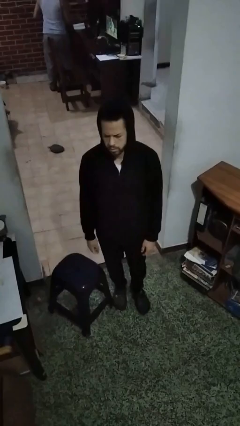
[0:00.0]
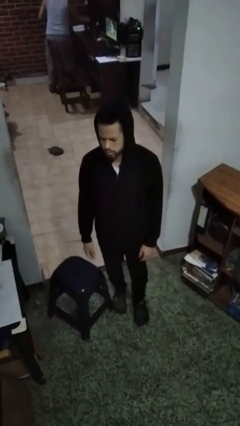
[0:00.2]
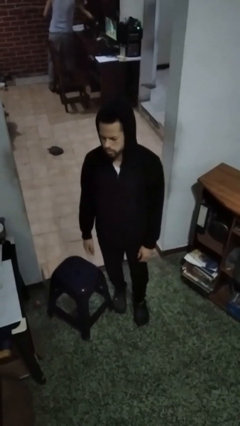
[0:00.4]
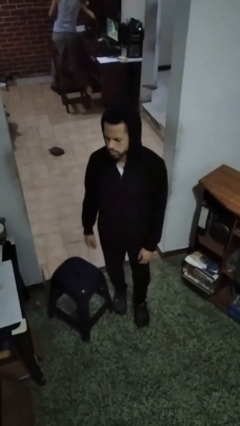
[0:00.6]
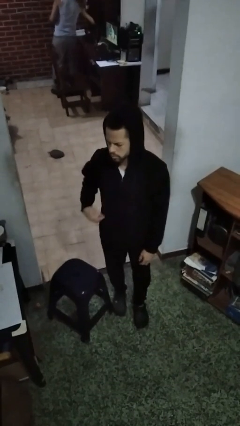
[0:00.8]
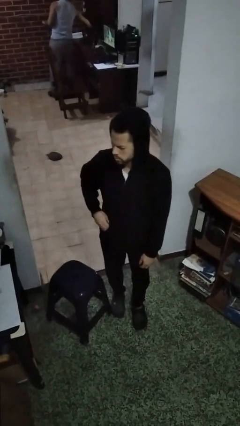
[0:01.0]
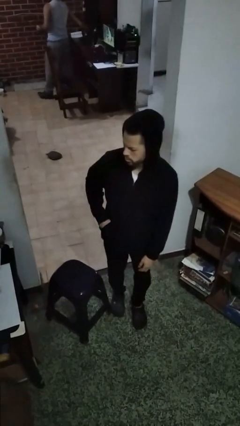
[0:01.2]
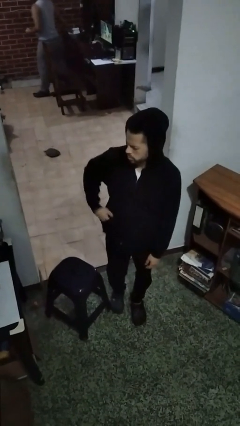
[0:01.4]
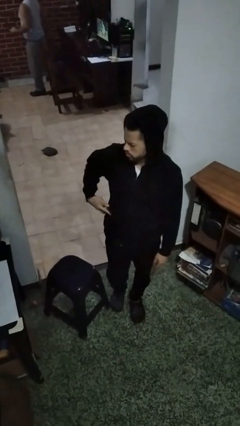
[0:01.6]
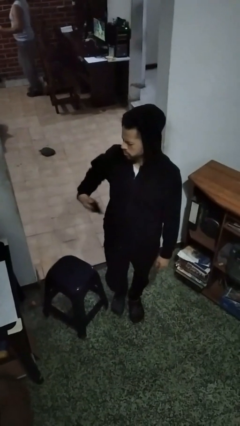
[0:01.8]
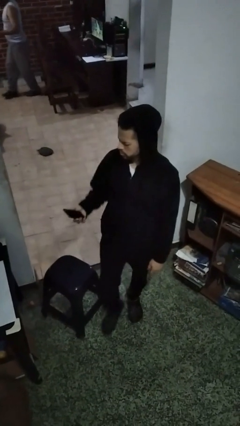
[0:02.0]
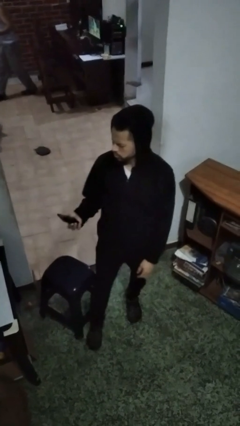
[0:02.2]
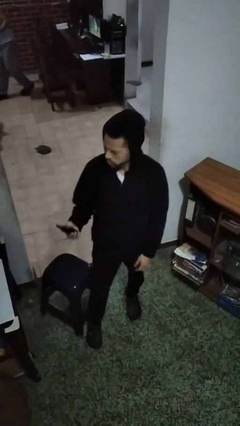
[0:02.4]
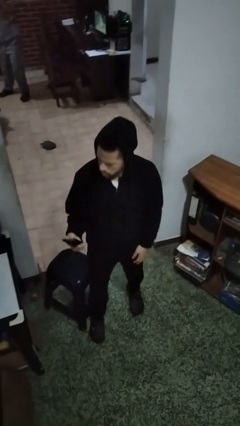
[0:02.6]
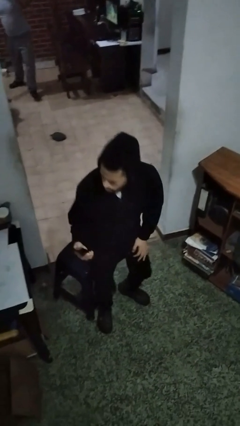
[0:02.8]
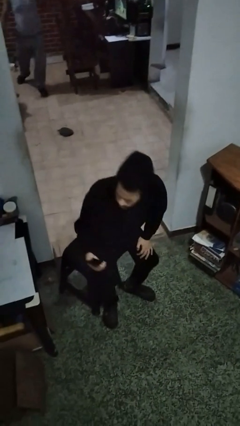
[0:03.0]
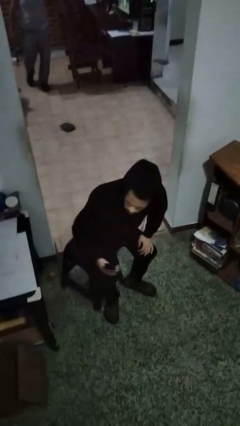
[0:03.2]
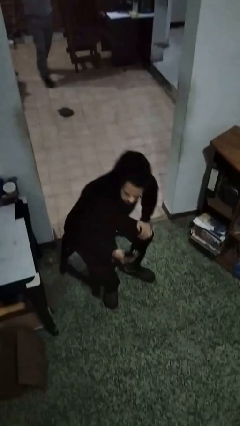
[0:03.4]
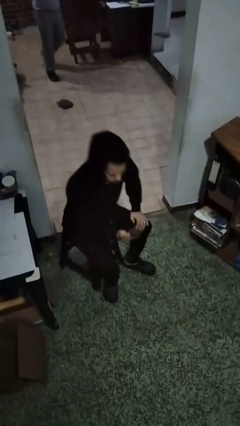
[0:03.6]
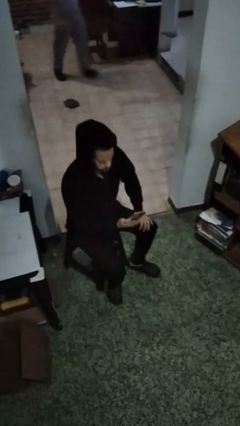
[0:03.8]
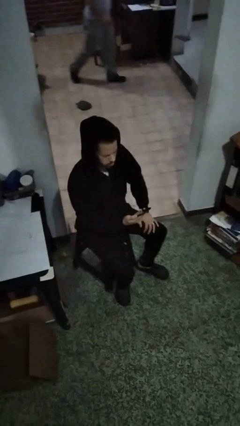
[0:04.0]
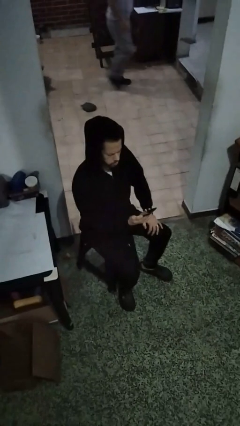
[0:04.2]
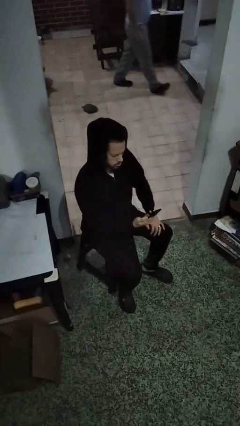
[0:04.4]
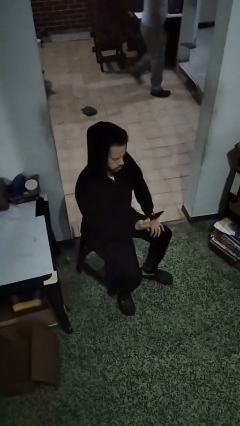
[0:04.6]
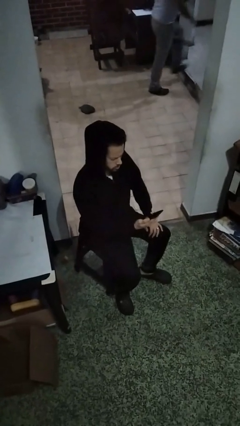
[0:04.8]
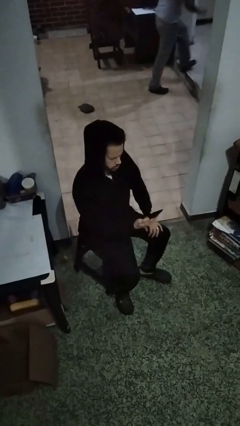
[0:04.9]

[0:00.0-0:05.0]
person takes phone from pocket

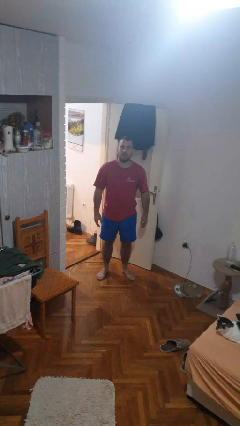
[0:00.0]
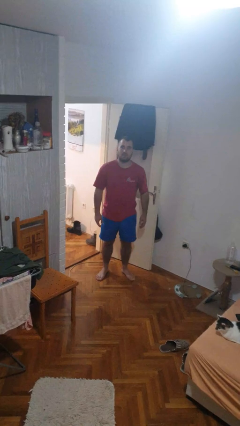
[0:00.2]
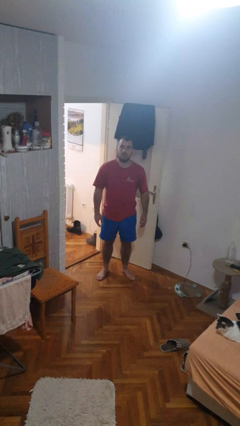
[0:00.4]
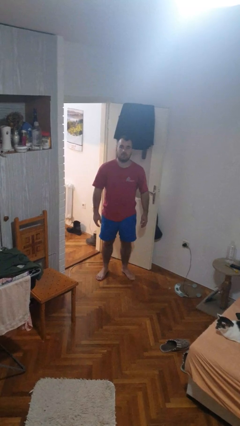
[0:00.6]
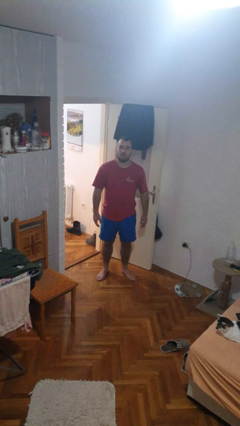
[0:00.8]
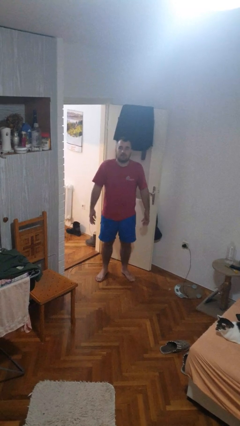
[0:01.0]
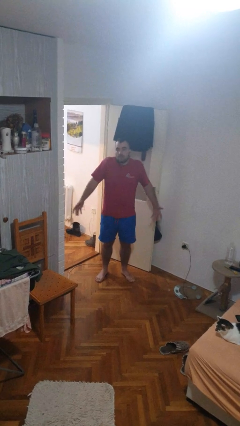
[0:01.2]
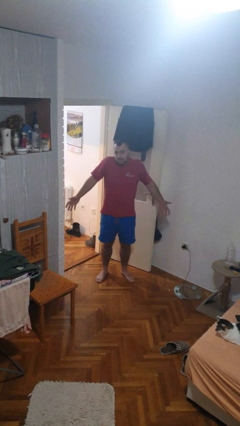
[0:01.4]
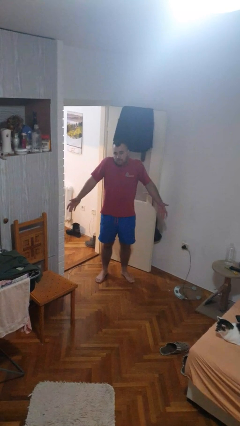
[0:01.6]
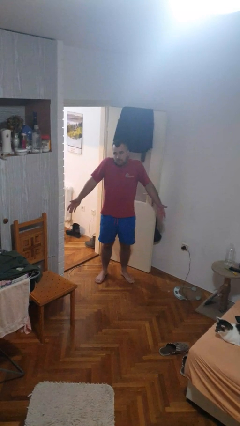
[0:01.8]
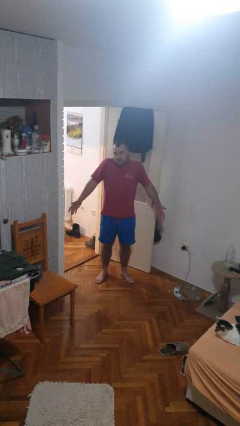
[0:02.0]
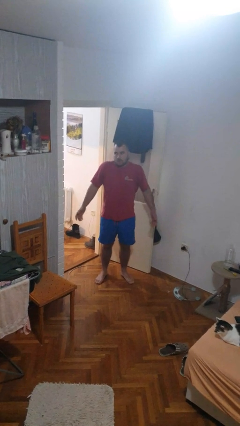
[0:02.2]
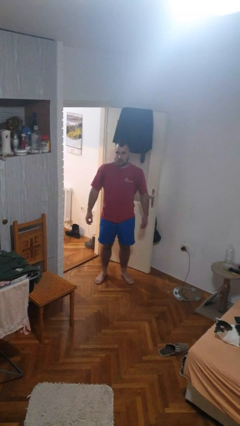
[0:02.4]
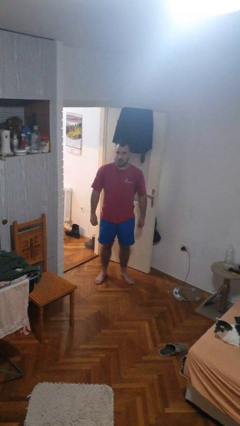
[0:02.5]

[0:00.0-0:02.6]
person shrugs

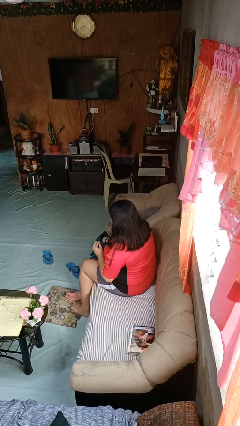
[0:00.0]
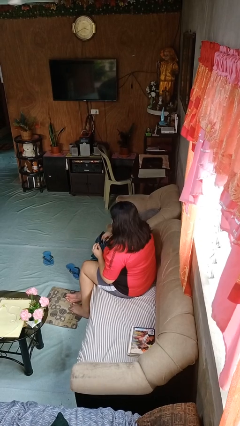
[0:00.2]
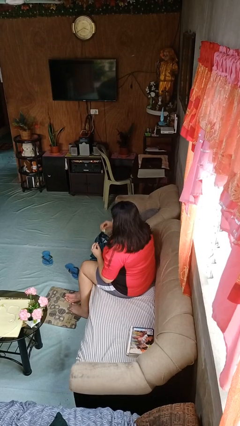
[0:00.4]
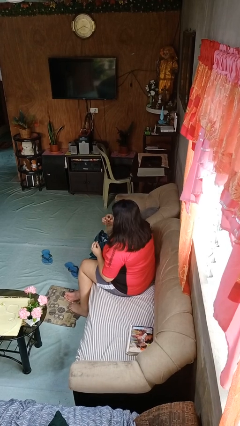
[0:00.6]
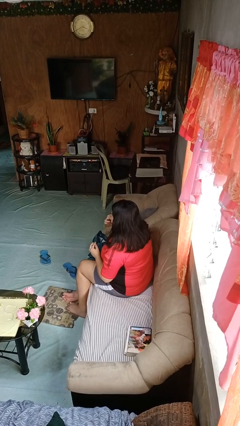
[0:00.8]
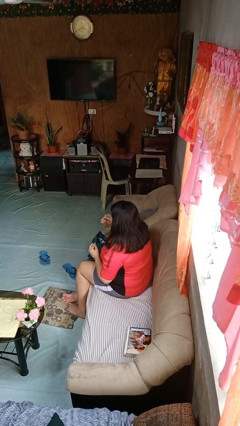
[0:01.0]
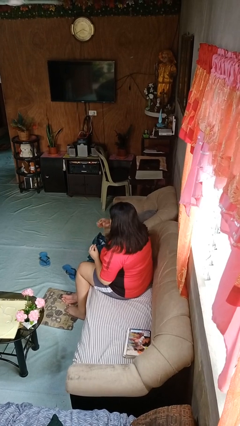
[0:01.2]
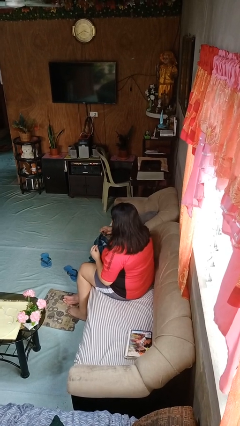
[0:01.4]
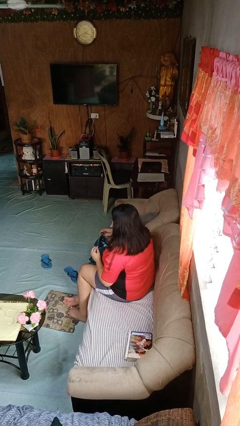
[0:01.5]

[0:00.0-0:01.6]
person eats snack from bag

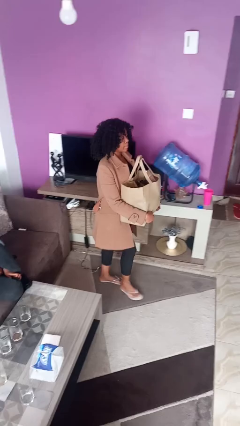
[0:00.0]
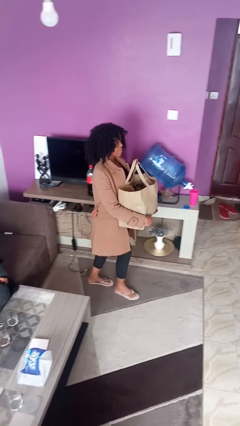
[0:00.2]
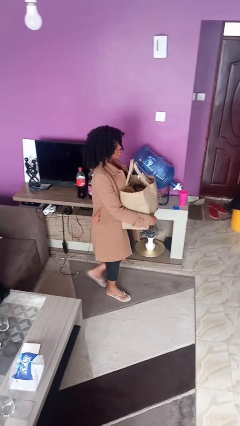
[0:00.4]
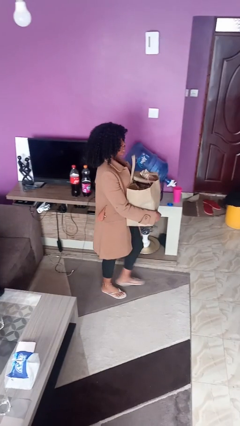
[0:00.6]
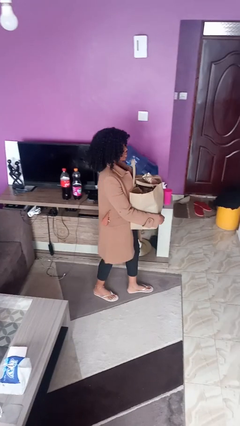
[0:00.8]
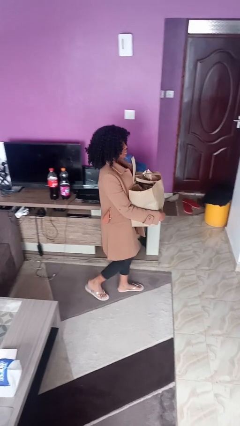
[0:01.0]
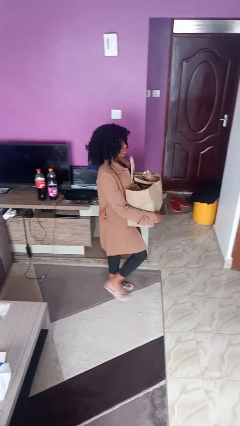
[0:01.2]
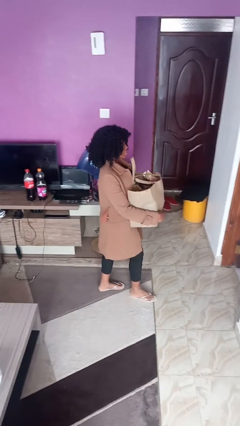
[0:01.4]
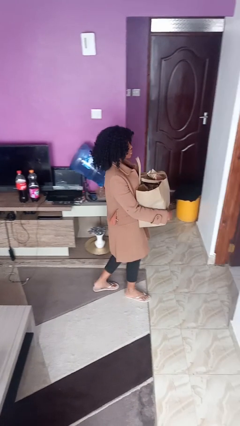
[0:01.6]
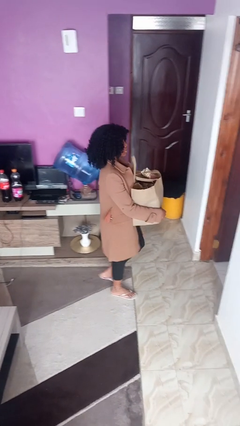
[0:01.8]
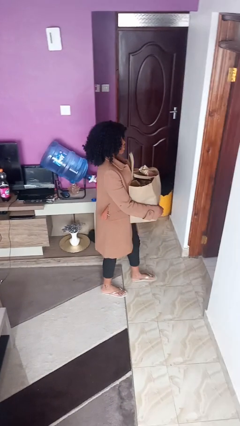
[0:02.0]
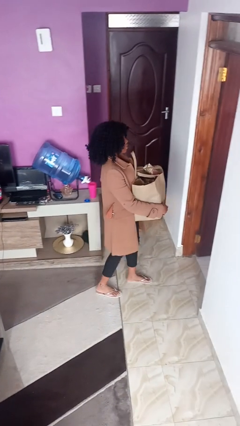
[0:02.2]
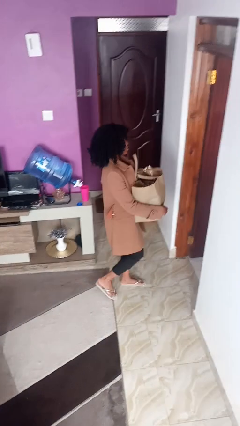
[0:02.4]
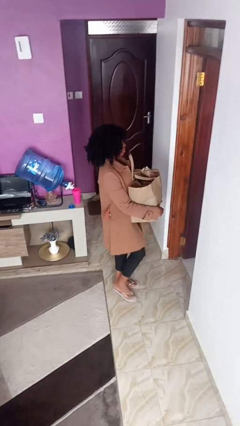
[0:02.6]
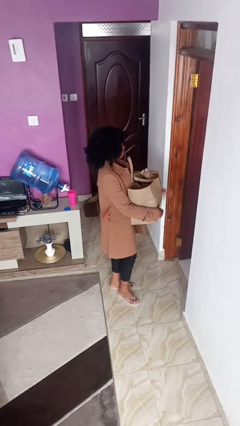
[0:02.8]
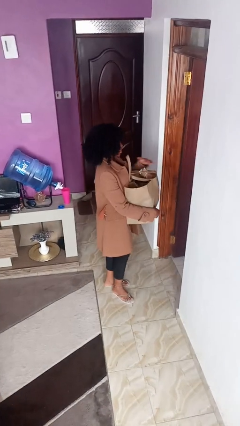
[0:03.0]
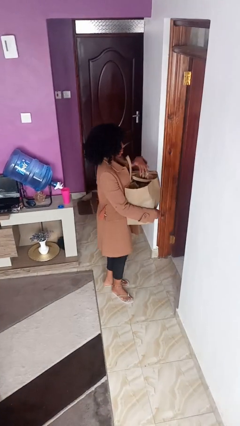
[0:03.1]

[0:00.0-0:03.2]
person carries groceries

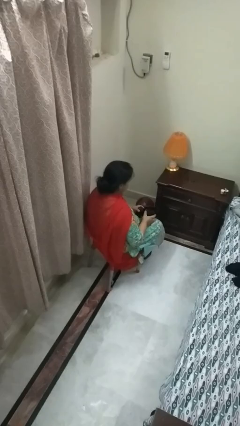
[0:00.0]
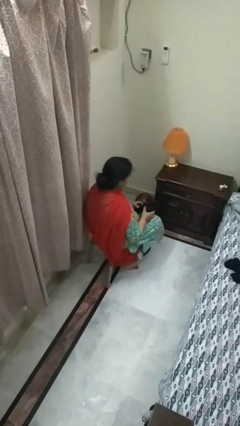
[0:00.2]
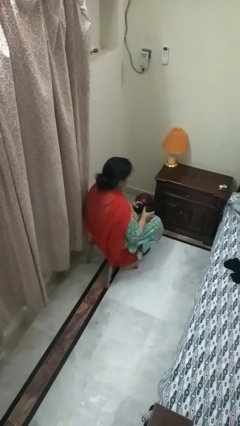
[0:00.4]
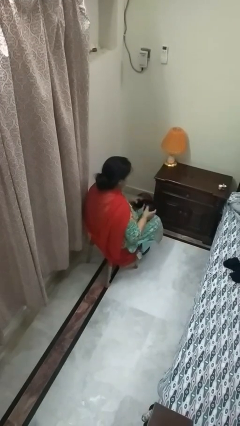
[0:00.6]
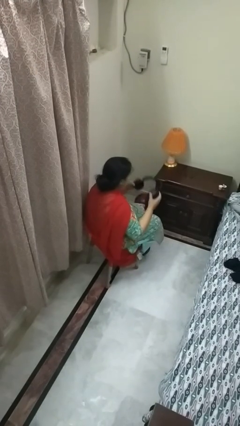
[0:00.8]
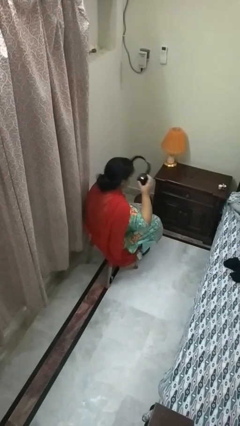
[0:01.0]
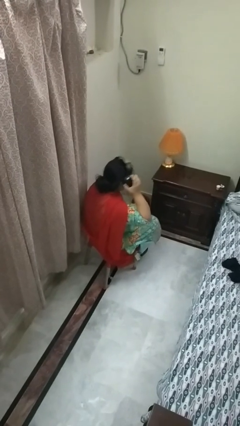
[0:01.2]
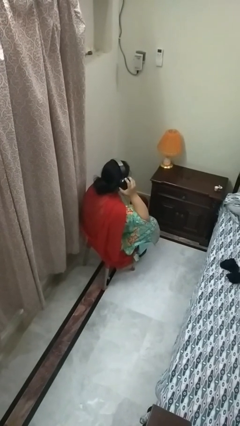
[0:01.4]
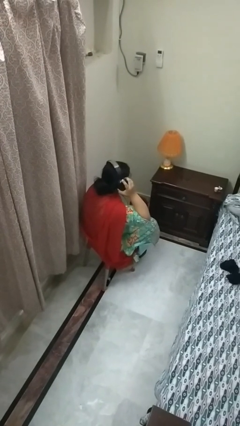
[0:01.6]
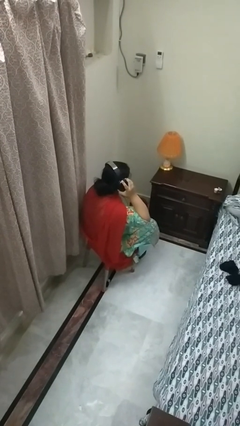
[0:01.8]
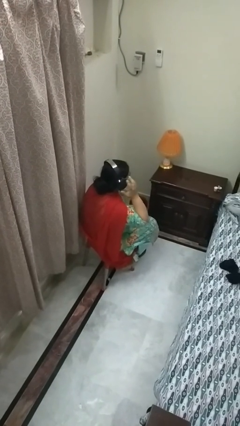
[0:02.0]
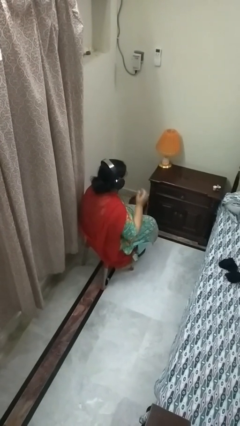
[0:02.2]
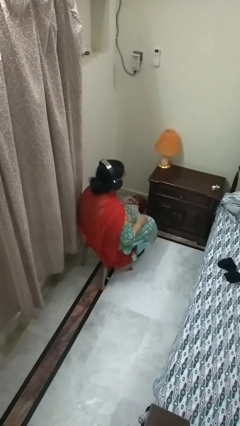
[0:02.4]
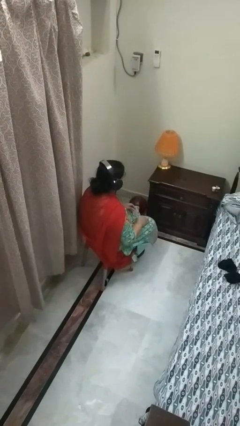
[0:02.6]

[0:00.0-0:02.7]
person puts on headphones

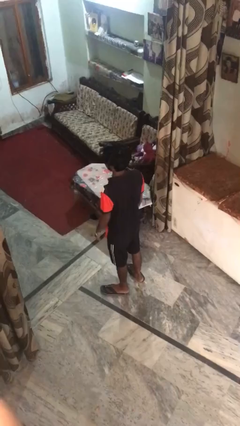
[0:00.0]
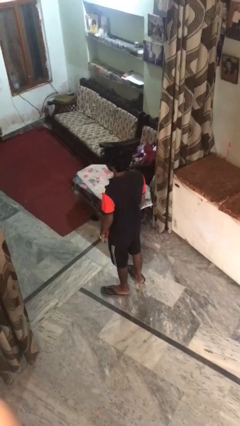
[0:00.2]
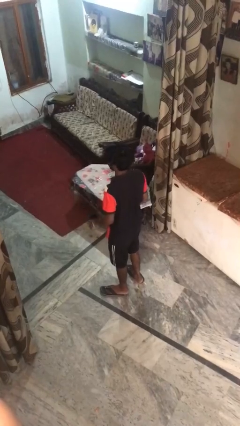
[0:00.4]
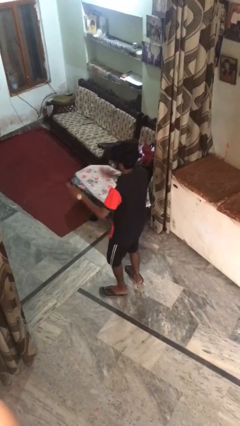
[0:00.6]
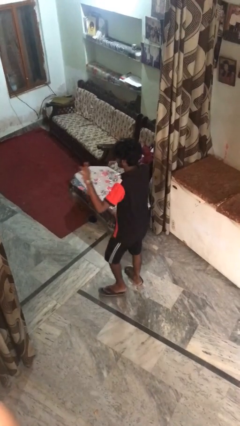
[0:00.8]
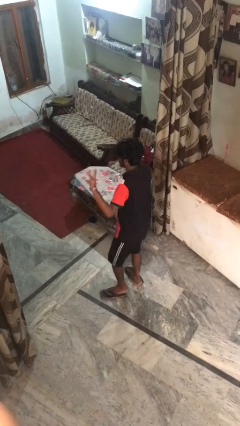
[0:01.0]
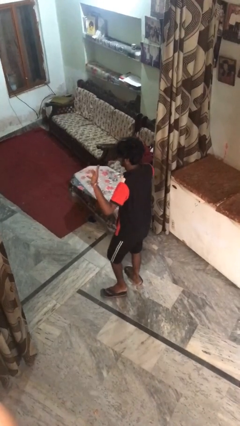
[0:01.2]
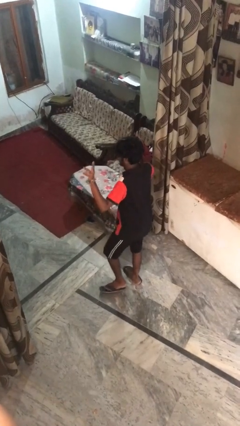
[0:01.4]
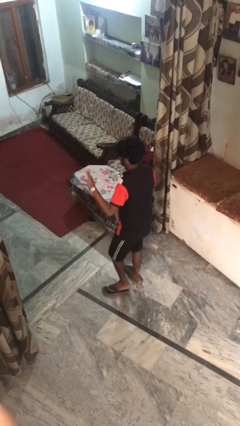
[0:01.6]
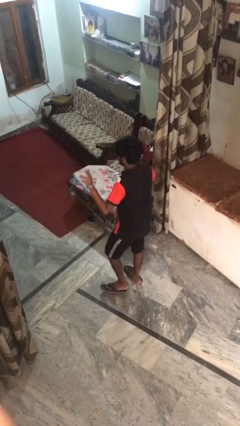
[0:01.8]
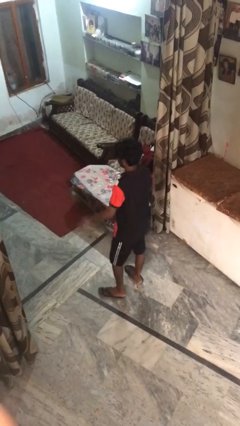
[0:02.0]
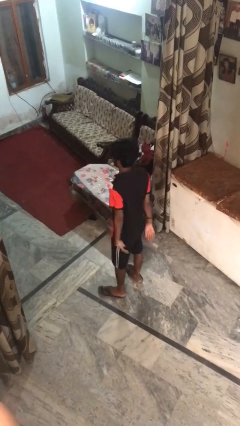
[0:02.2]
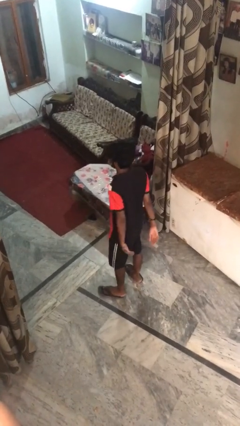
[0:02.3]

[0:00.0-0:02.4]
person dances in place
